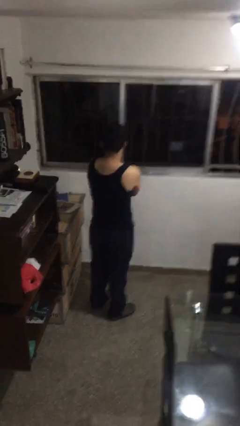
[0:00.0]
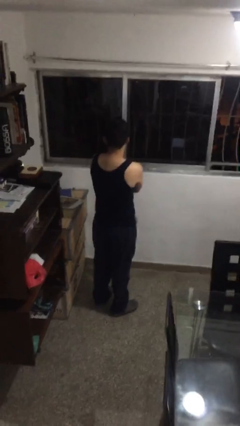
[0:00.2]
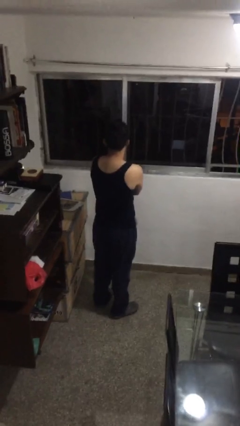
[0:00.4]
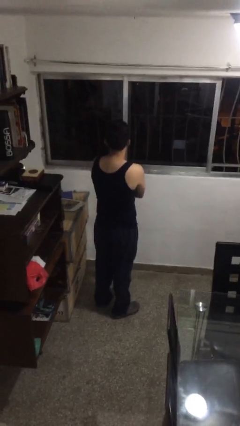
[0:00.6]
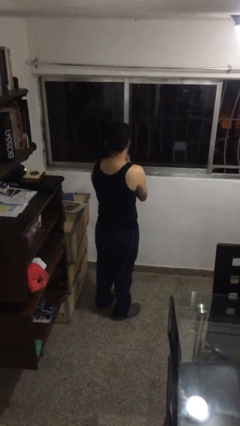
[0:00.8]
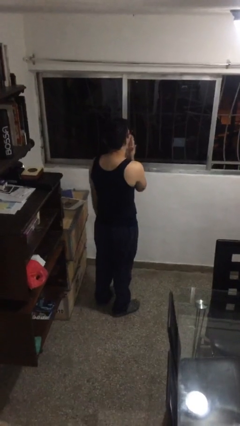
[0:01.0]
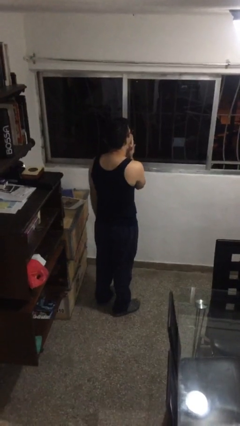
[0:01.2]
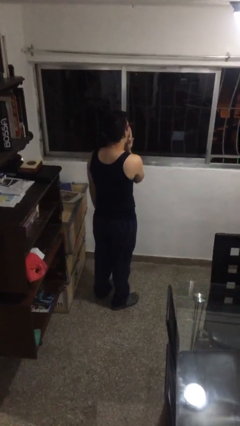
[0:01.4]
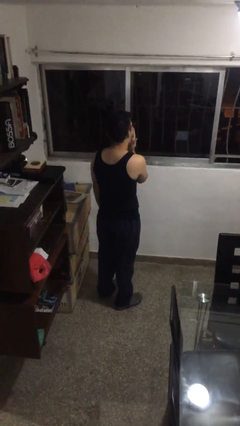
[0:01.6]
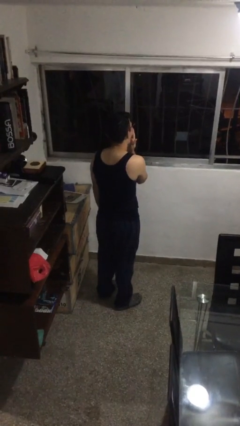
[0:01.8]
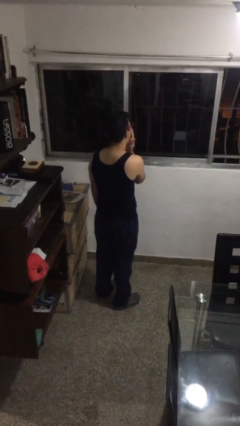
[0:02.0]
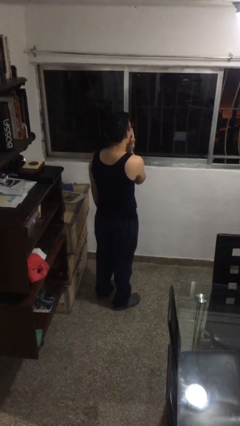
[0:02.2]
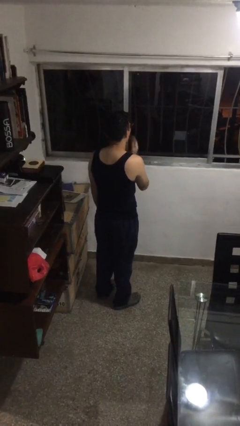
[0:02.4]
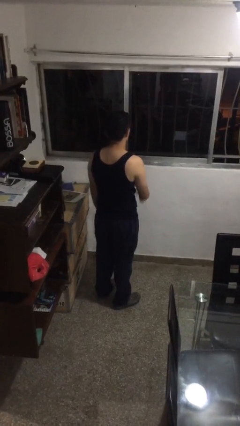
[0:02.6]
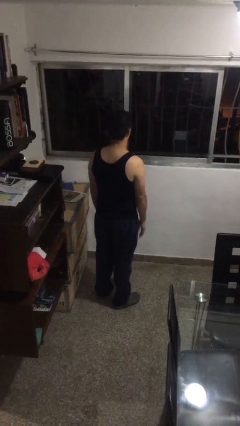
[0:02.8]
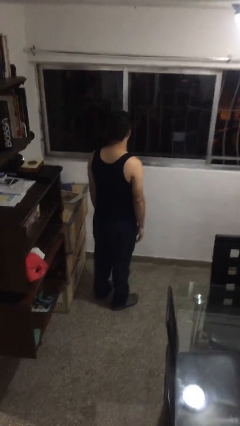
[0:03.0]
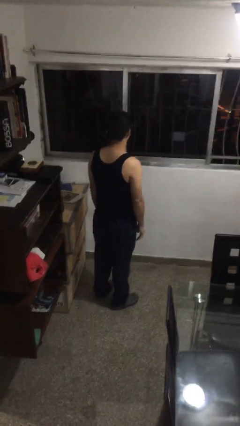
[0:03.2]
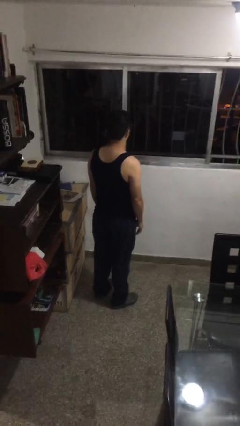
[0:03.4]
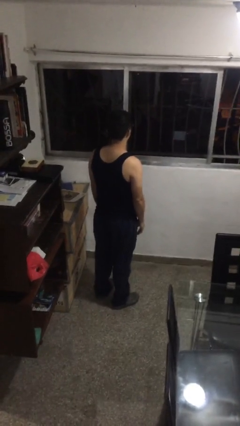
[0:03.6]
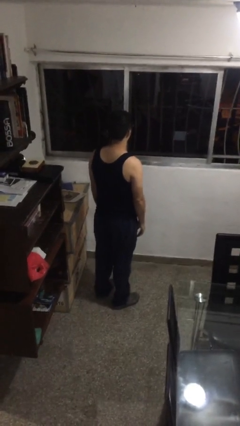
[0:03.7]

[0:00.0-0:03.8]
person yawns

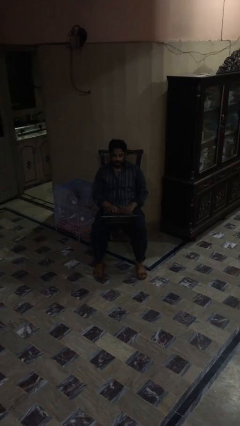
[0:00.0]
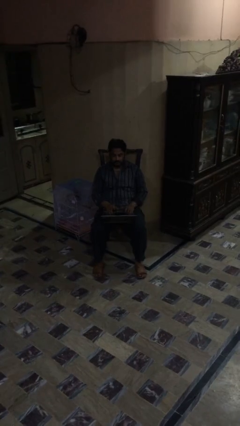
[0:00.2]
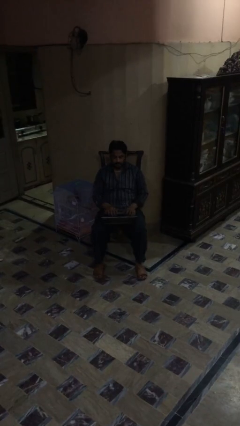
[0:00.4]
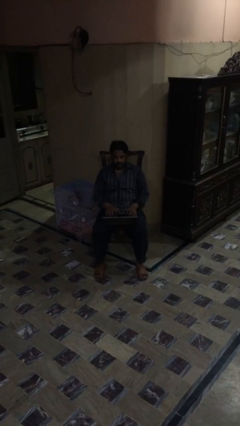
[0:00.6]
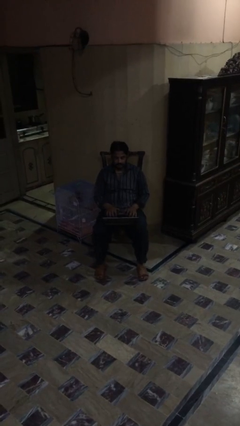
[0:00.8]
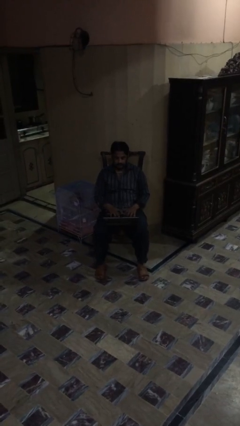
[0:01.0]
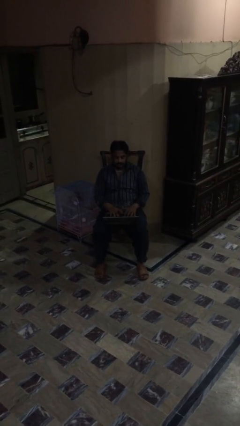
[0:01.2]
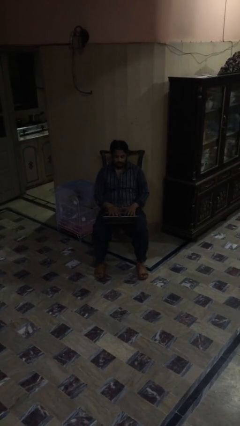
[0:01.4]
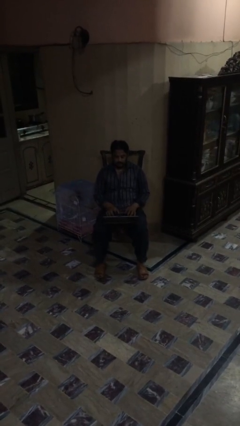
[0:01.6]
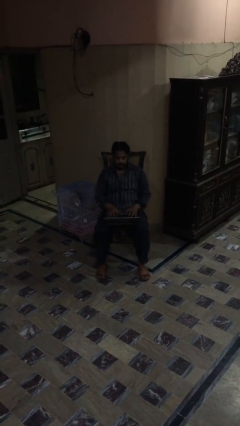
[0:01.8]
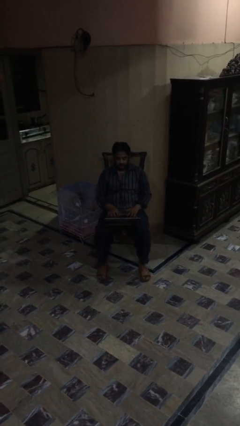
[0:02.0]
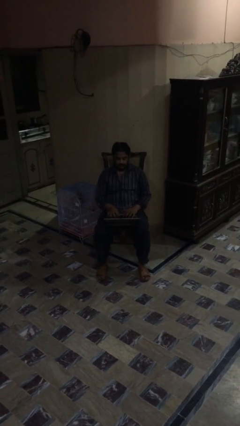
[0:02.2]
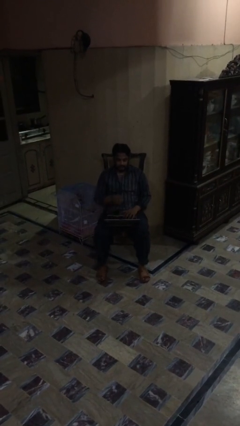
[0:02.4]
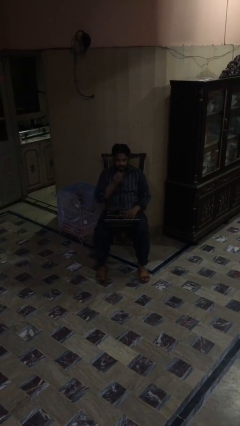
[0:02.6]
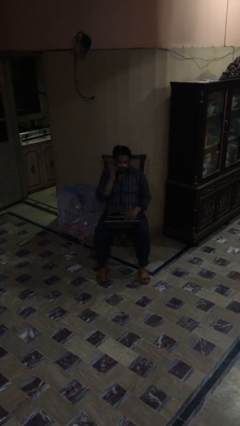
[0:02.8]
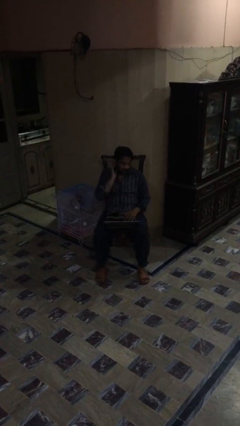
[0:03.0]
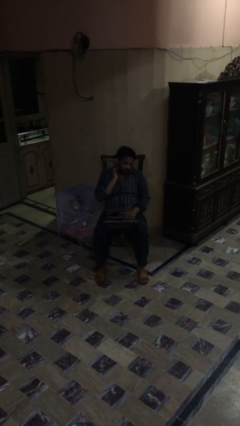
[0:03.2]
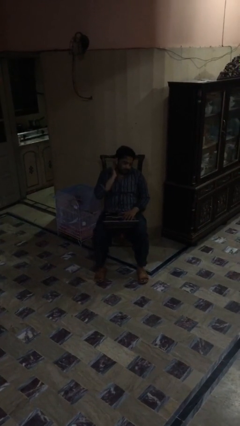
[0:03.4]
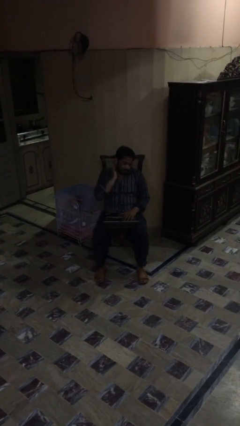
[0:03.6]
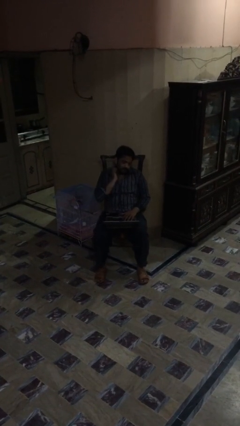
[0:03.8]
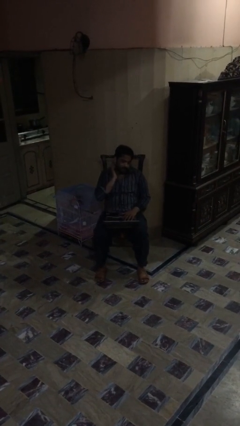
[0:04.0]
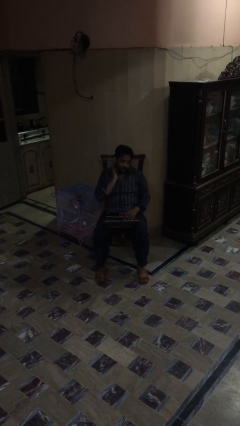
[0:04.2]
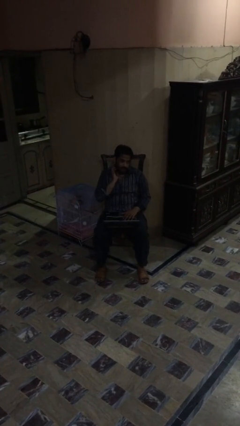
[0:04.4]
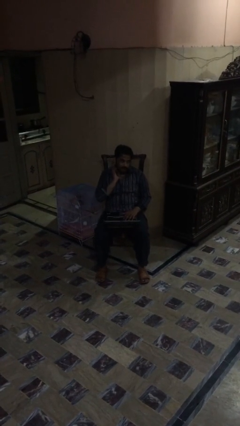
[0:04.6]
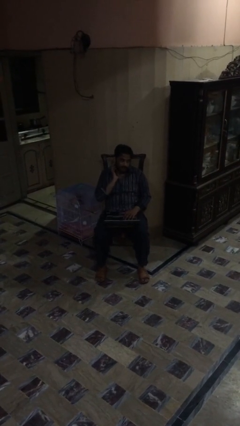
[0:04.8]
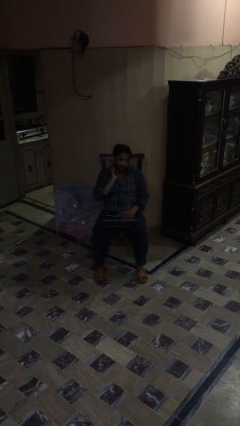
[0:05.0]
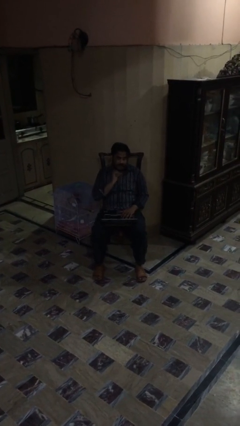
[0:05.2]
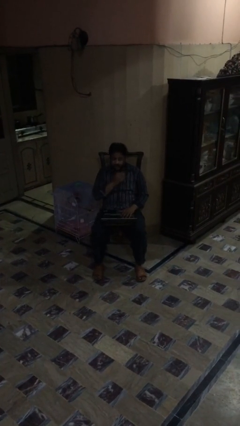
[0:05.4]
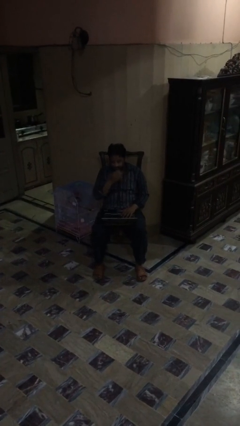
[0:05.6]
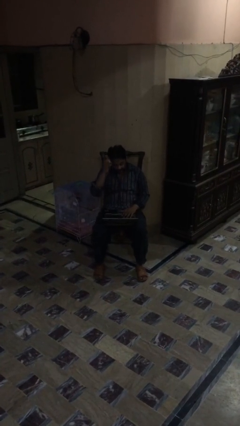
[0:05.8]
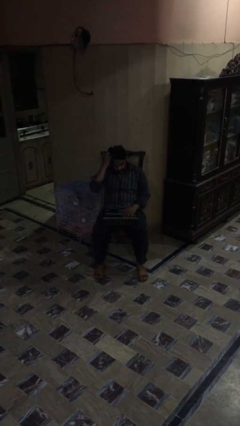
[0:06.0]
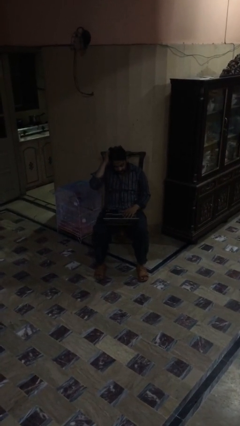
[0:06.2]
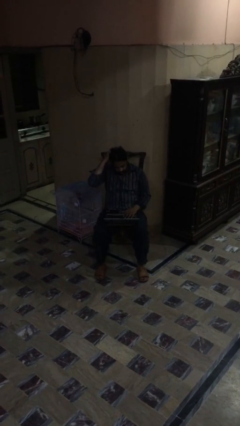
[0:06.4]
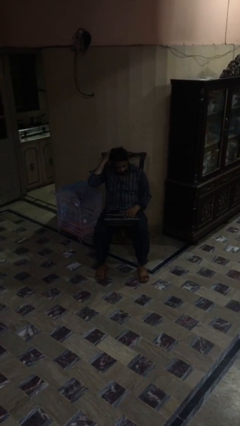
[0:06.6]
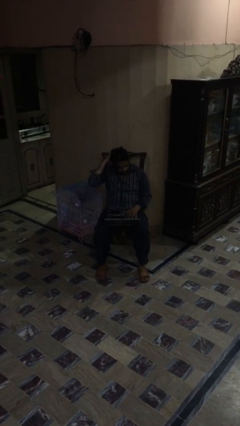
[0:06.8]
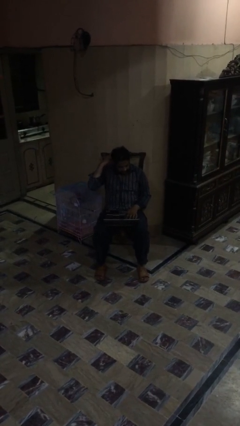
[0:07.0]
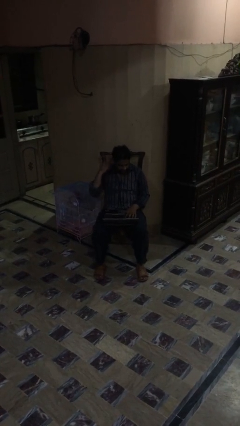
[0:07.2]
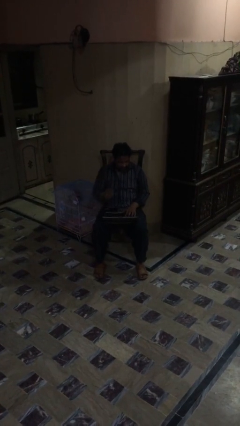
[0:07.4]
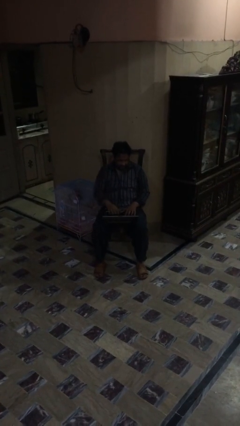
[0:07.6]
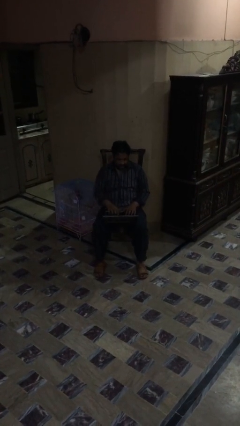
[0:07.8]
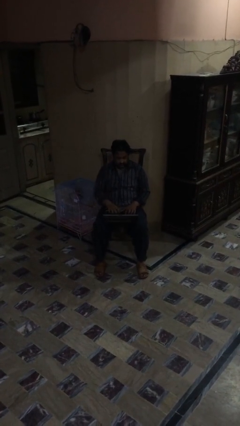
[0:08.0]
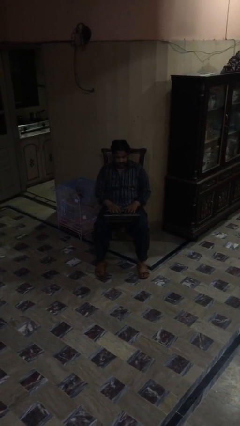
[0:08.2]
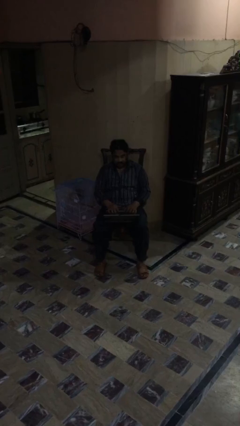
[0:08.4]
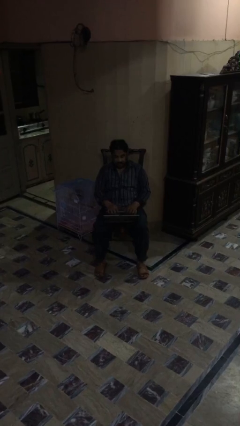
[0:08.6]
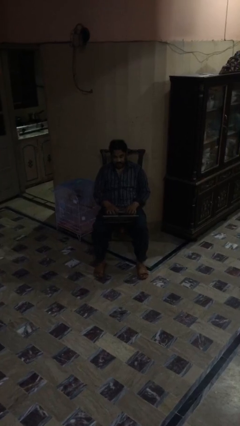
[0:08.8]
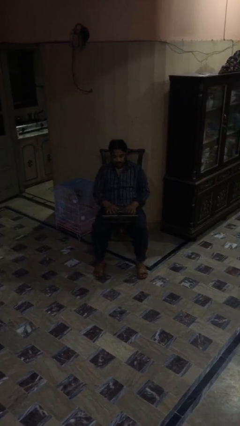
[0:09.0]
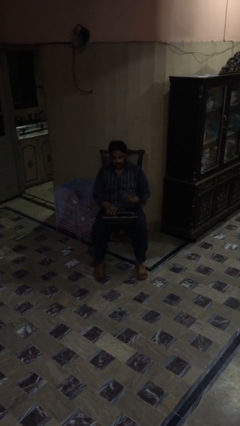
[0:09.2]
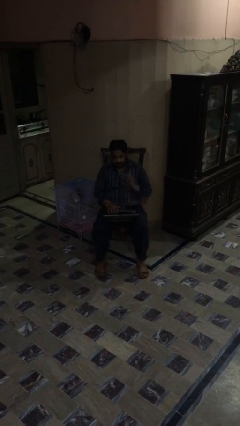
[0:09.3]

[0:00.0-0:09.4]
person interacts with laptop

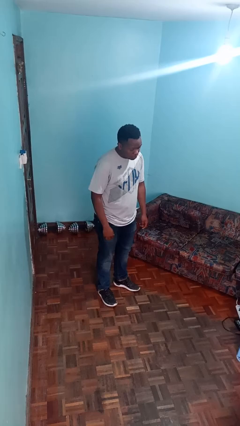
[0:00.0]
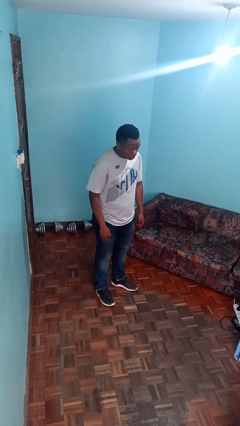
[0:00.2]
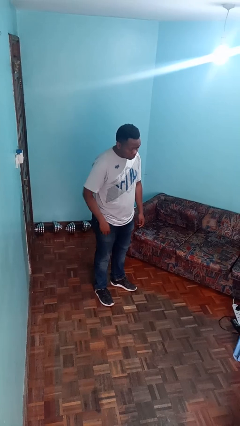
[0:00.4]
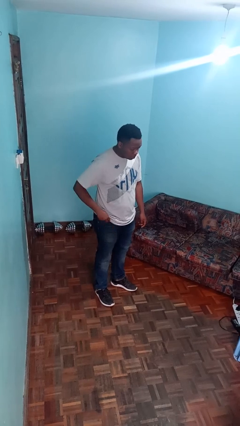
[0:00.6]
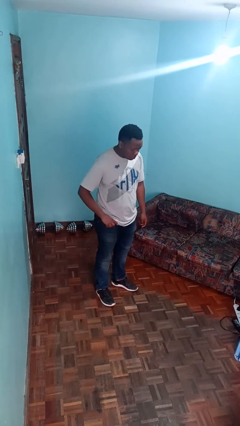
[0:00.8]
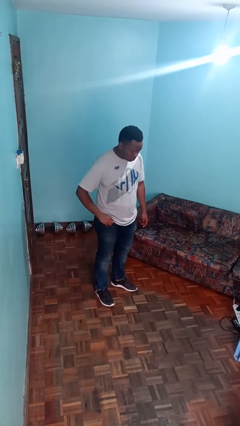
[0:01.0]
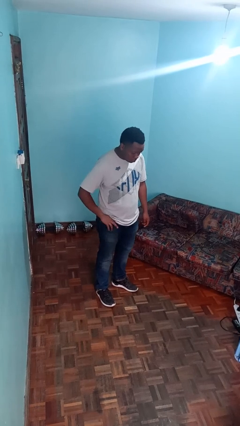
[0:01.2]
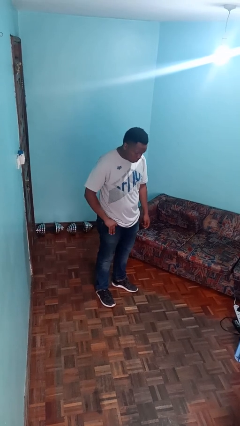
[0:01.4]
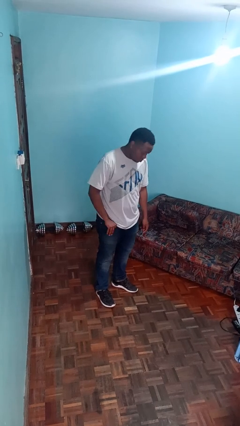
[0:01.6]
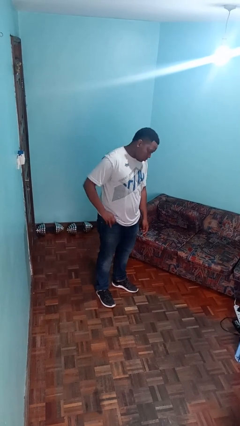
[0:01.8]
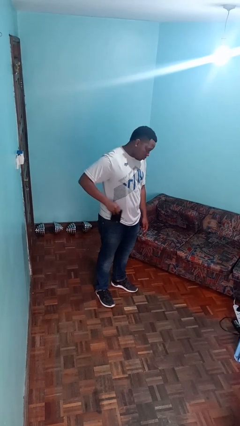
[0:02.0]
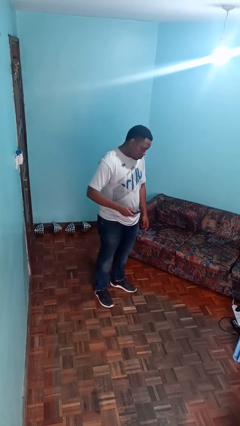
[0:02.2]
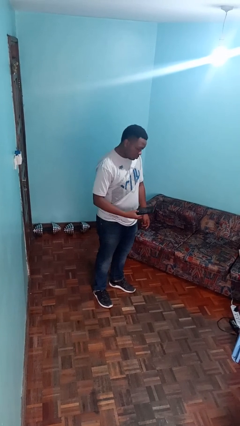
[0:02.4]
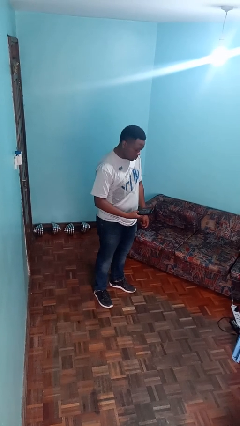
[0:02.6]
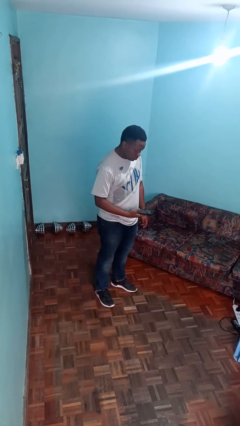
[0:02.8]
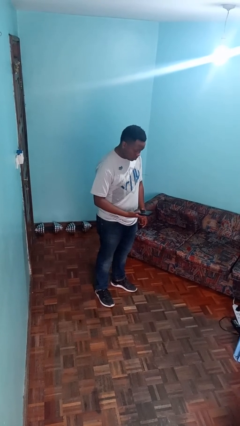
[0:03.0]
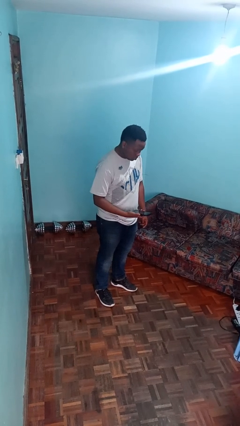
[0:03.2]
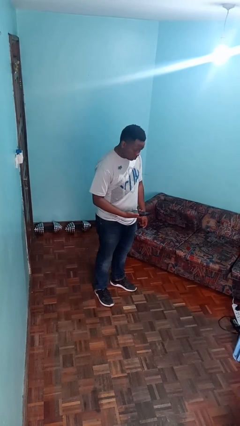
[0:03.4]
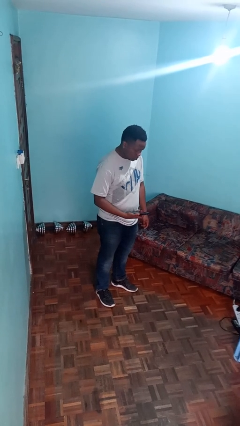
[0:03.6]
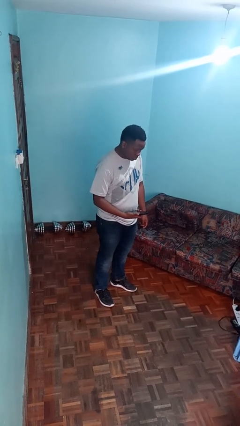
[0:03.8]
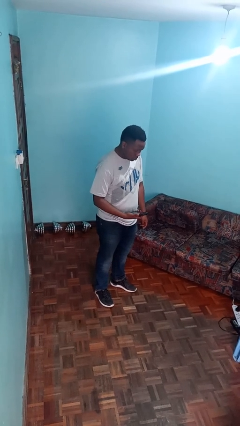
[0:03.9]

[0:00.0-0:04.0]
person takes phone from pocket

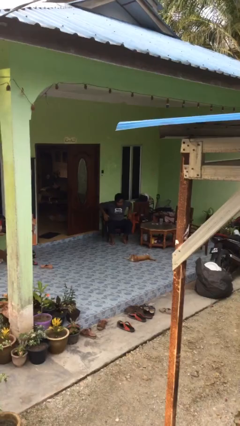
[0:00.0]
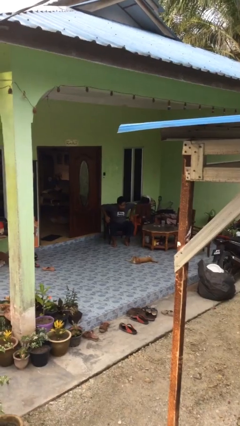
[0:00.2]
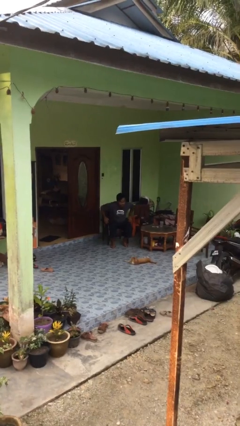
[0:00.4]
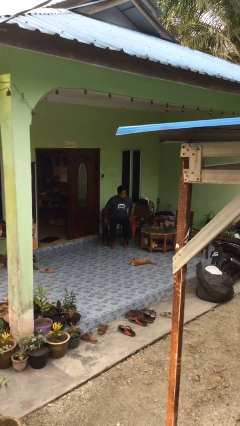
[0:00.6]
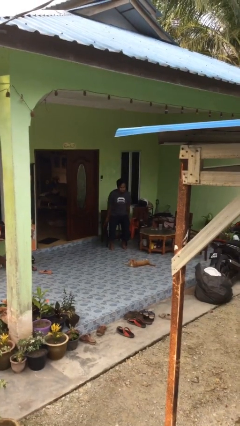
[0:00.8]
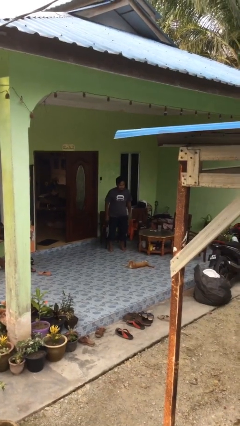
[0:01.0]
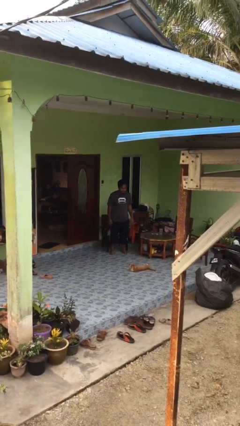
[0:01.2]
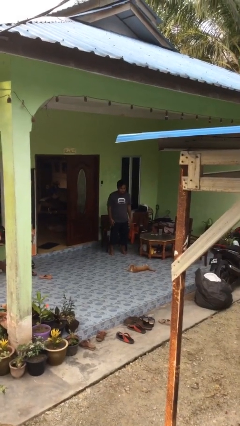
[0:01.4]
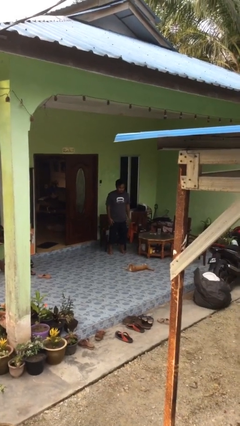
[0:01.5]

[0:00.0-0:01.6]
person stands up
